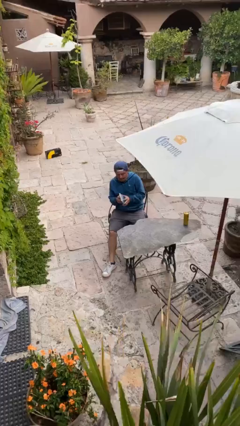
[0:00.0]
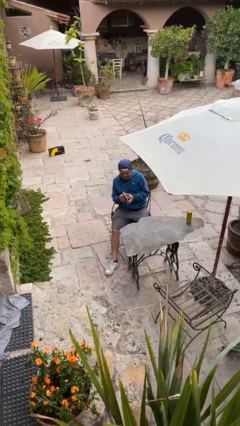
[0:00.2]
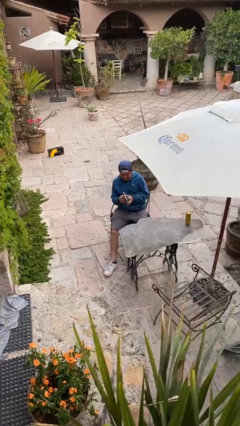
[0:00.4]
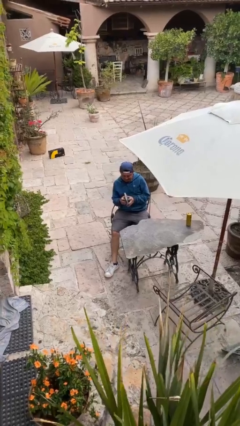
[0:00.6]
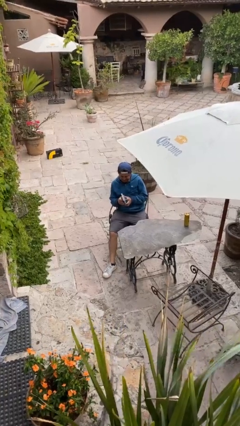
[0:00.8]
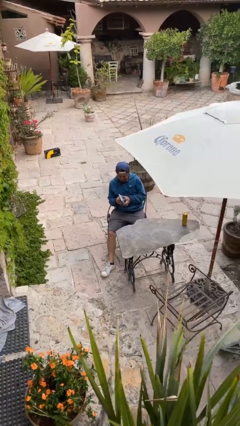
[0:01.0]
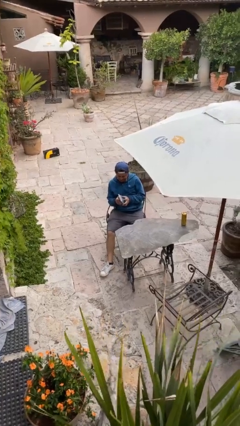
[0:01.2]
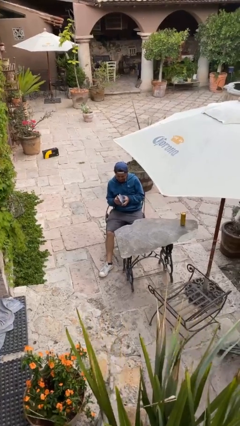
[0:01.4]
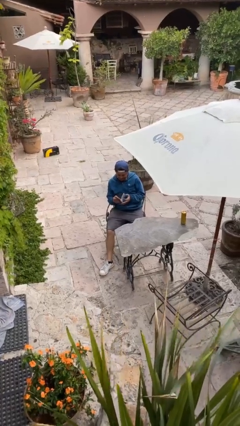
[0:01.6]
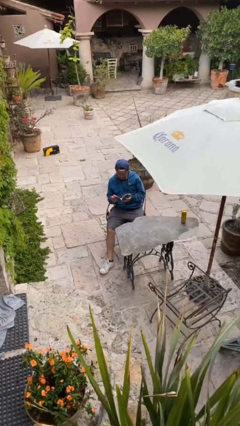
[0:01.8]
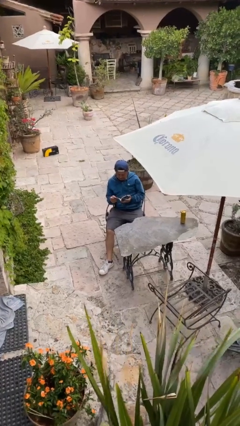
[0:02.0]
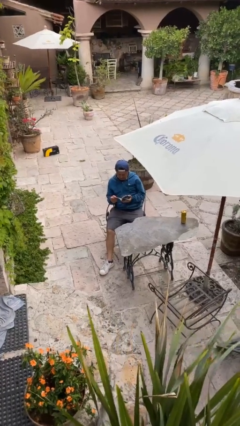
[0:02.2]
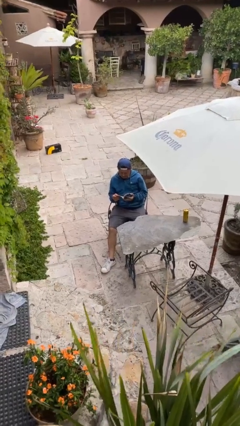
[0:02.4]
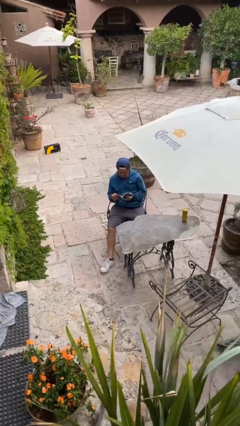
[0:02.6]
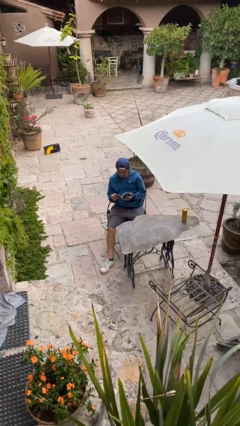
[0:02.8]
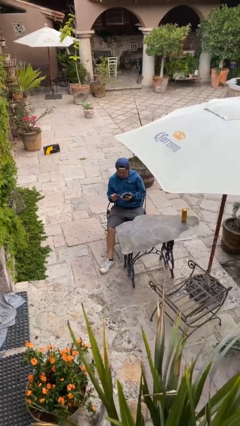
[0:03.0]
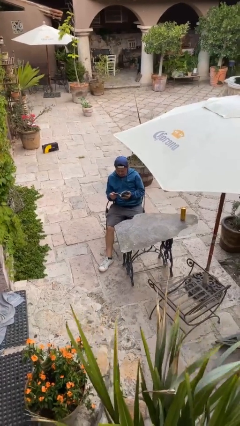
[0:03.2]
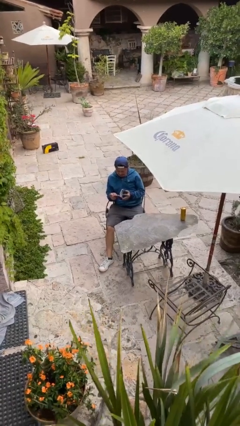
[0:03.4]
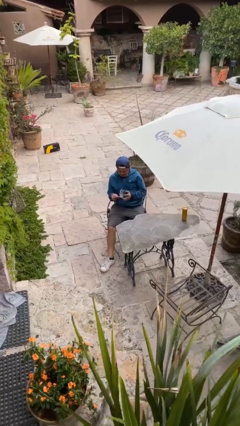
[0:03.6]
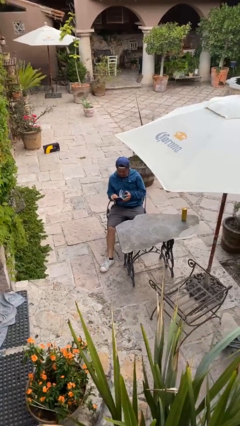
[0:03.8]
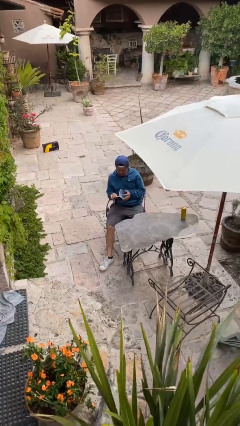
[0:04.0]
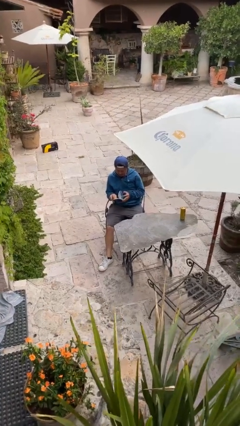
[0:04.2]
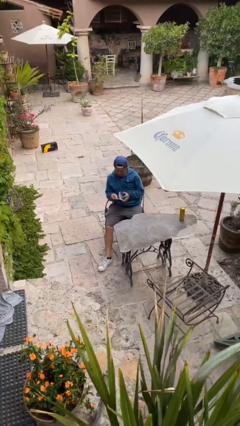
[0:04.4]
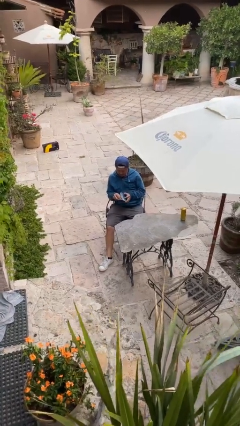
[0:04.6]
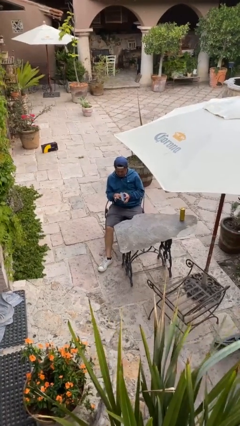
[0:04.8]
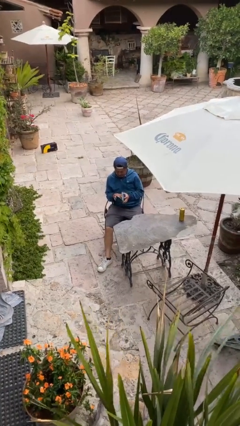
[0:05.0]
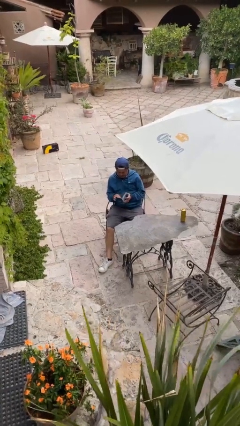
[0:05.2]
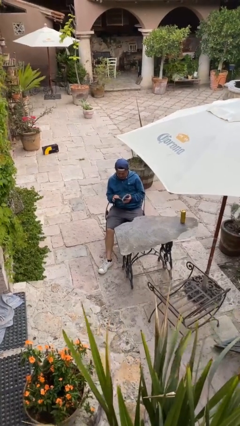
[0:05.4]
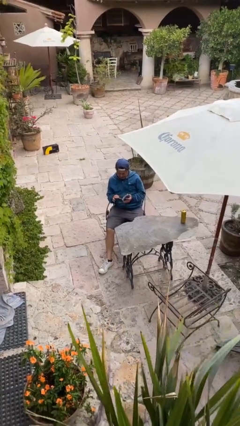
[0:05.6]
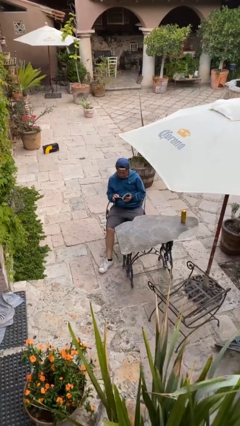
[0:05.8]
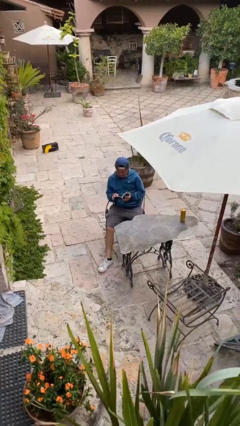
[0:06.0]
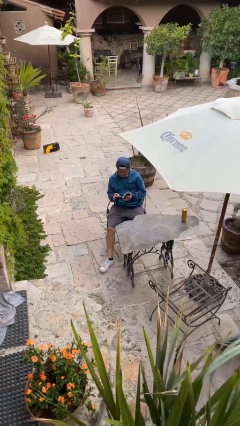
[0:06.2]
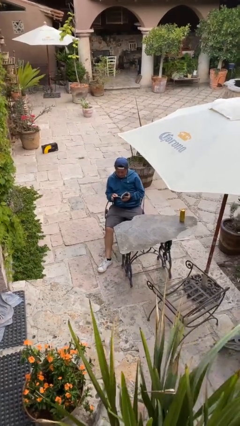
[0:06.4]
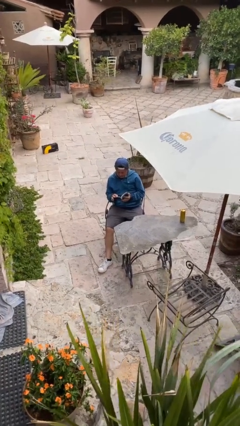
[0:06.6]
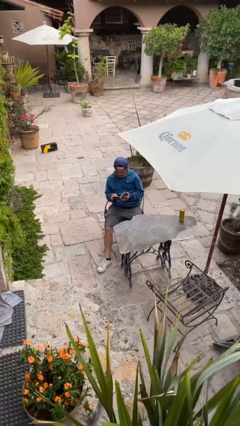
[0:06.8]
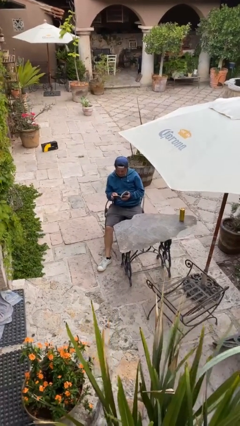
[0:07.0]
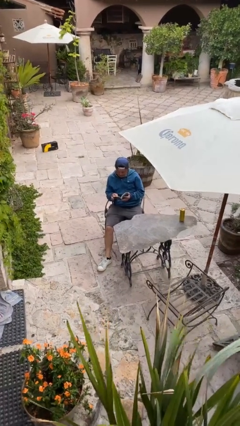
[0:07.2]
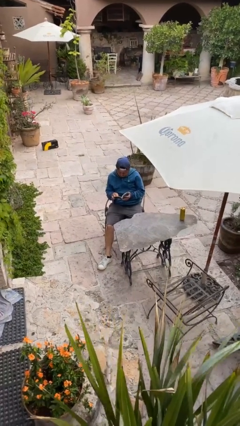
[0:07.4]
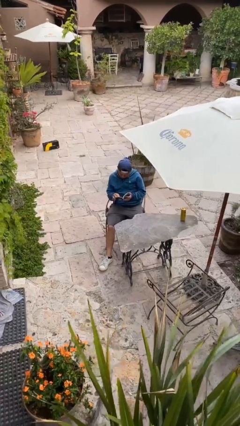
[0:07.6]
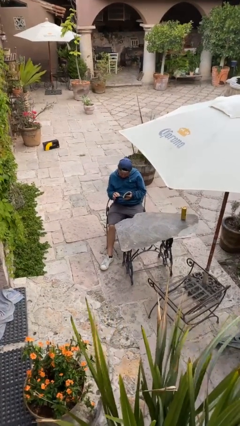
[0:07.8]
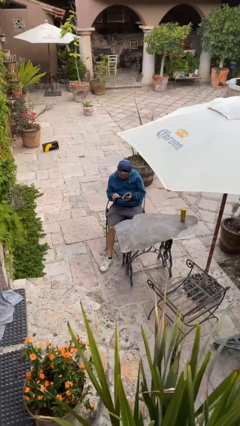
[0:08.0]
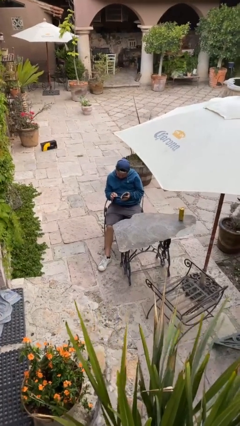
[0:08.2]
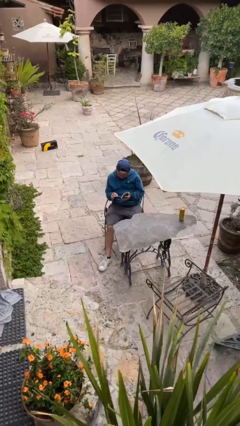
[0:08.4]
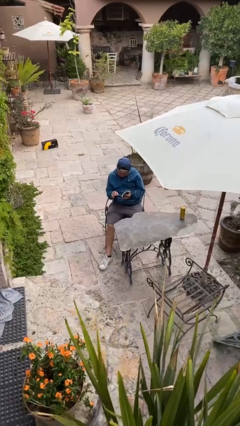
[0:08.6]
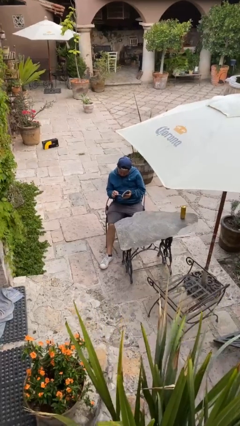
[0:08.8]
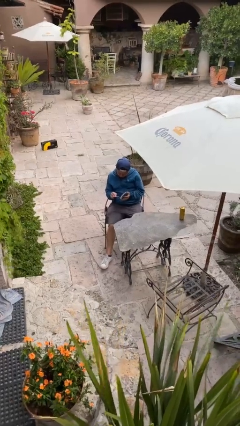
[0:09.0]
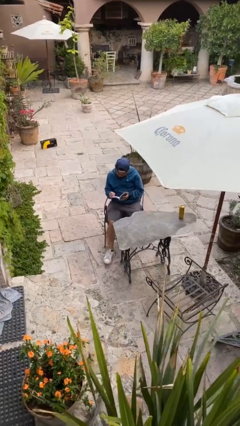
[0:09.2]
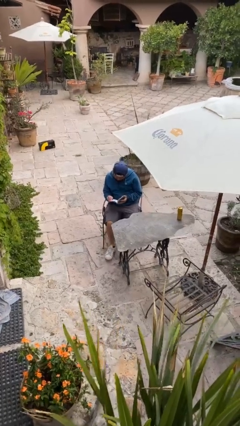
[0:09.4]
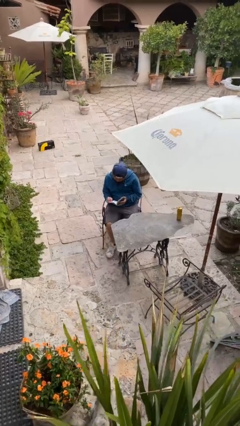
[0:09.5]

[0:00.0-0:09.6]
person reads document

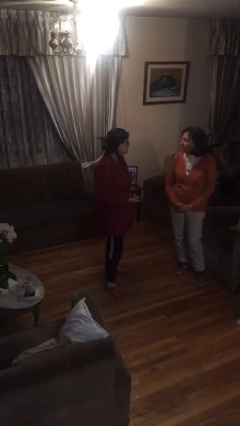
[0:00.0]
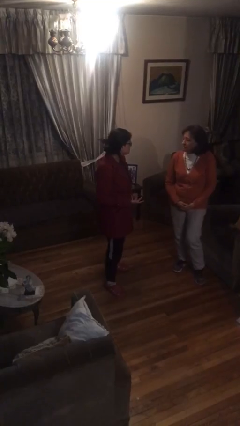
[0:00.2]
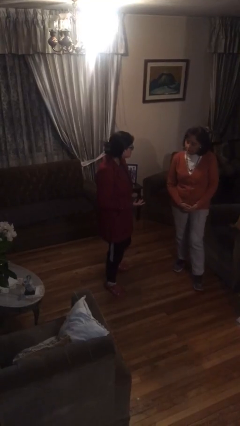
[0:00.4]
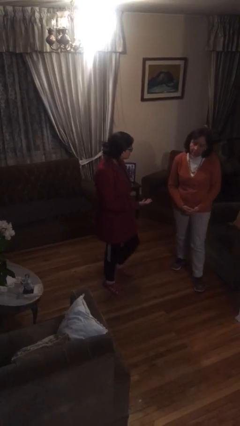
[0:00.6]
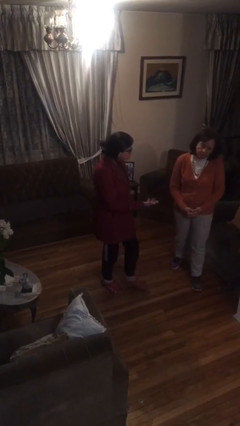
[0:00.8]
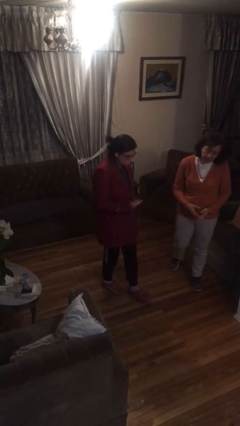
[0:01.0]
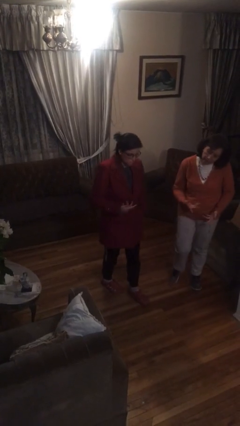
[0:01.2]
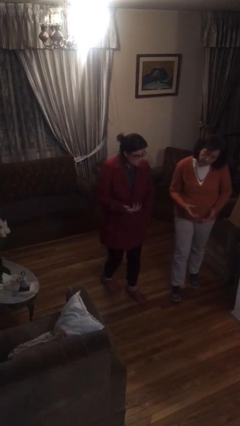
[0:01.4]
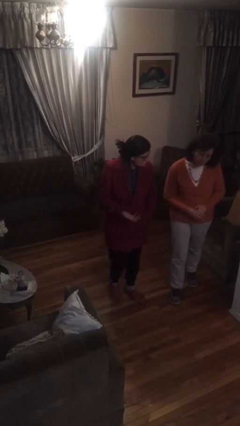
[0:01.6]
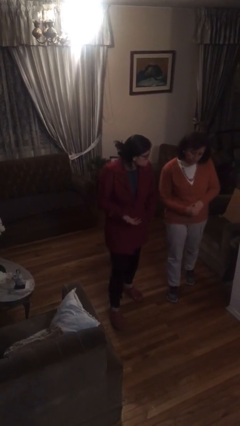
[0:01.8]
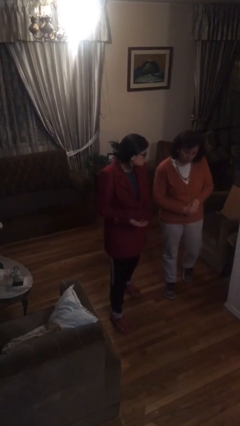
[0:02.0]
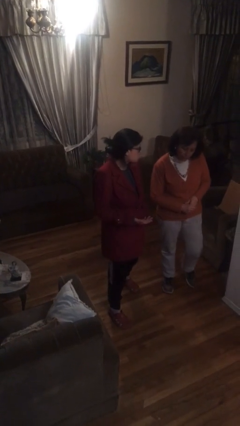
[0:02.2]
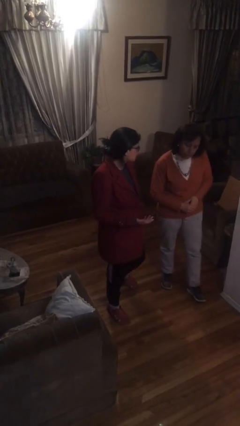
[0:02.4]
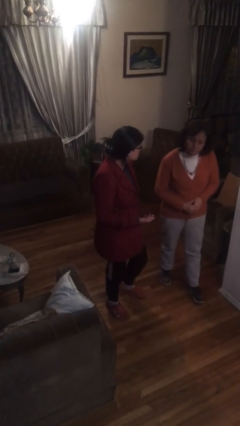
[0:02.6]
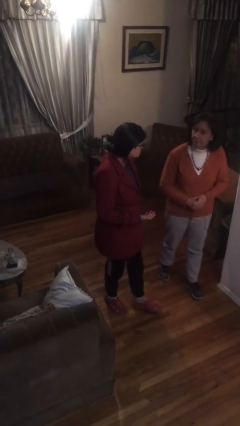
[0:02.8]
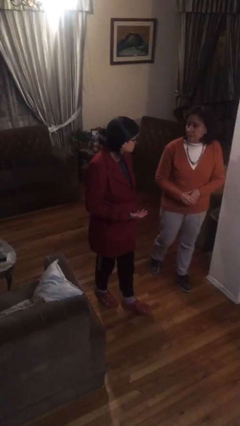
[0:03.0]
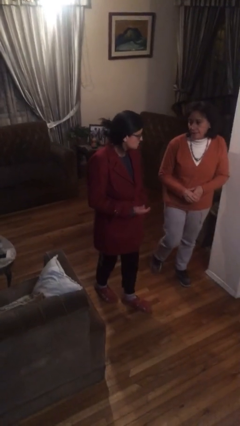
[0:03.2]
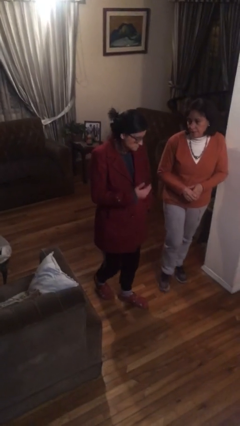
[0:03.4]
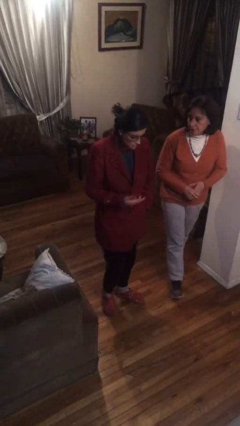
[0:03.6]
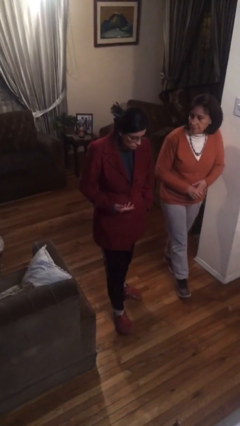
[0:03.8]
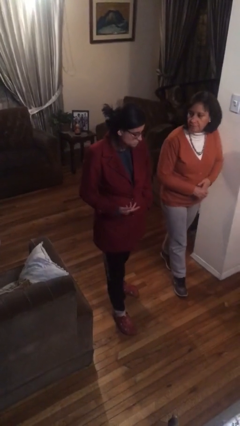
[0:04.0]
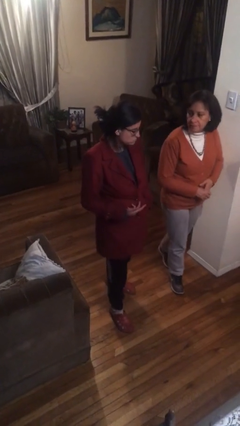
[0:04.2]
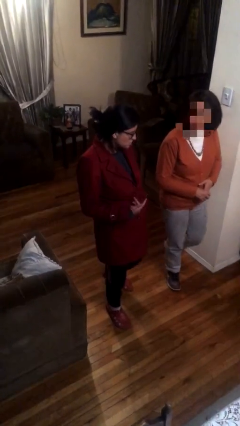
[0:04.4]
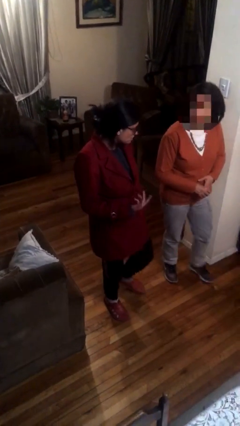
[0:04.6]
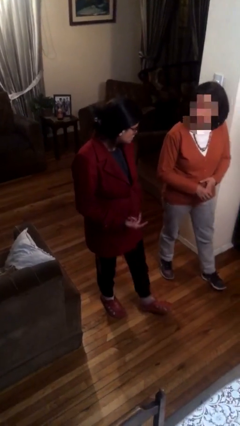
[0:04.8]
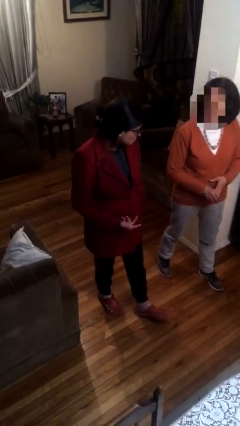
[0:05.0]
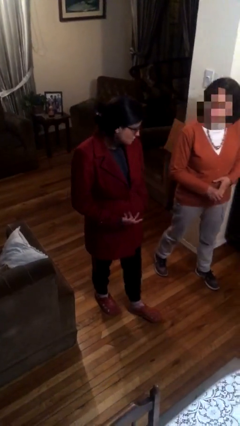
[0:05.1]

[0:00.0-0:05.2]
person talks to person

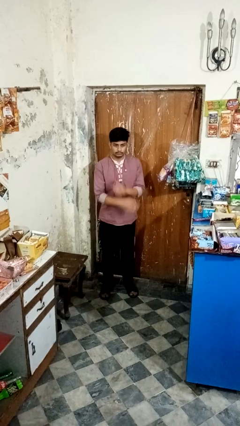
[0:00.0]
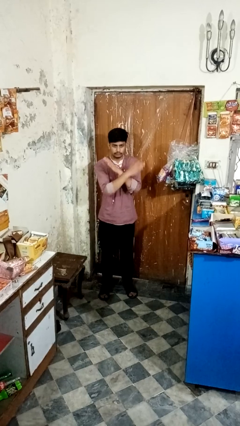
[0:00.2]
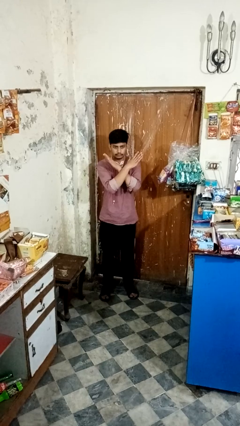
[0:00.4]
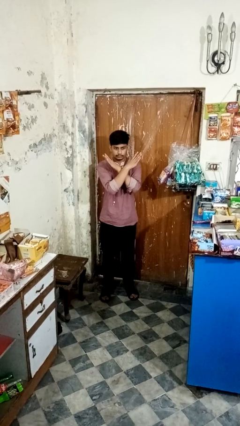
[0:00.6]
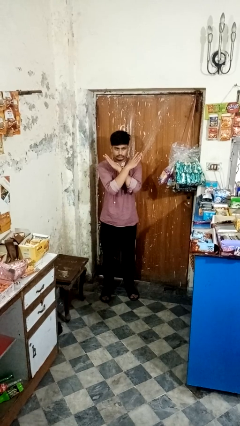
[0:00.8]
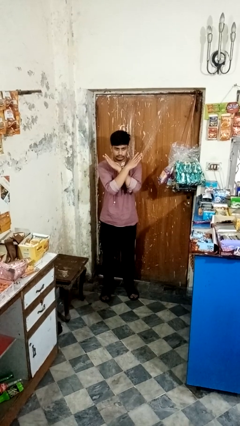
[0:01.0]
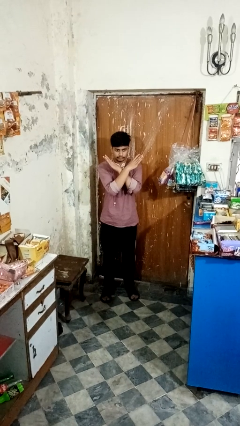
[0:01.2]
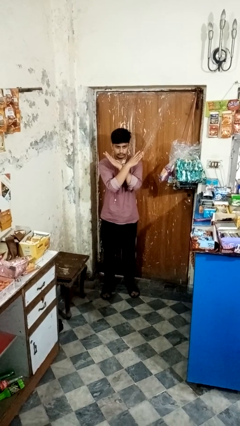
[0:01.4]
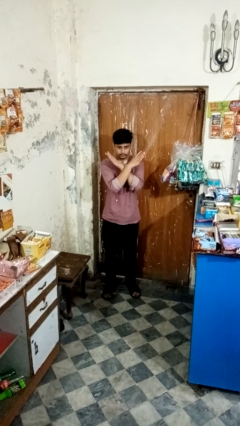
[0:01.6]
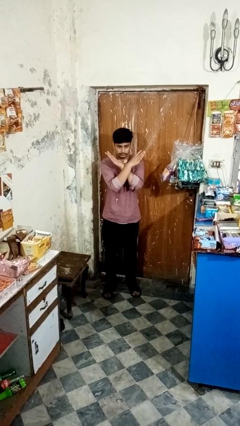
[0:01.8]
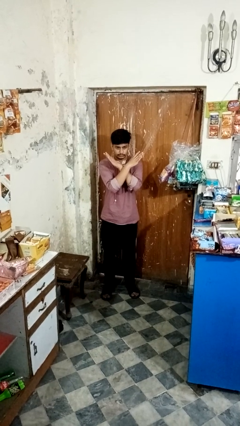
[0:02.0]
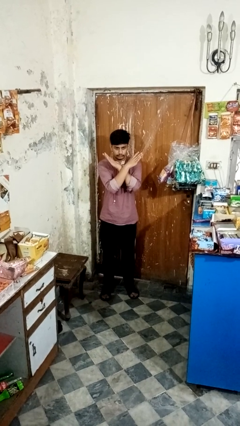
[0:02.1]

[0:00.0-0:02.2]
person gestures arms x

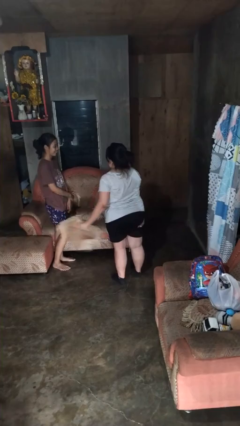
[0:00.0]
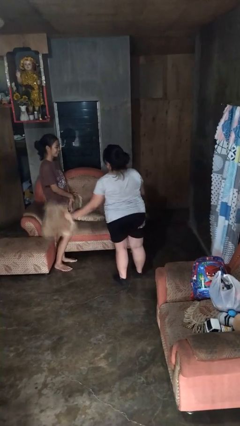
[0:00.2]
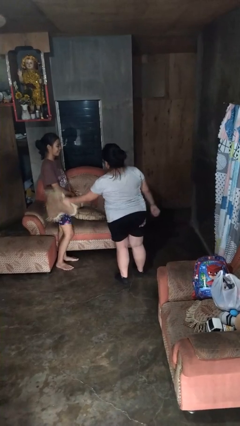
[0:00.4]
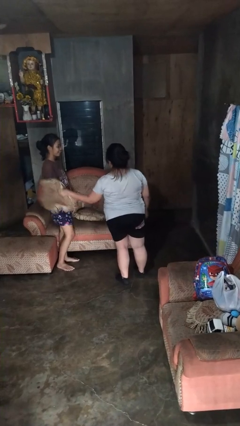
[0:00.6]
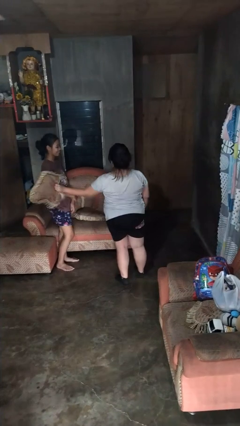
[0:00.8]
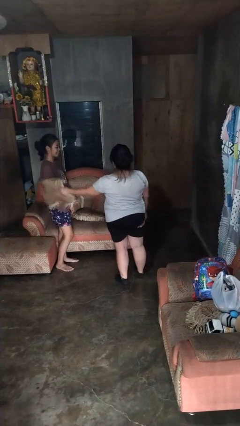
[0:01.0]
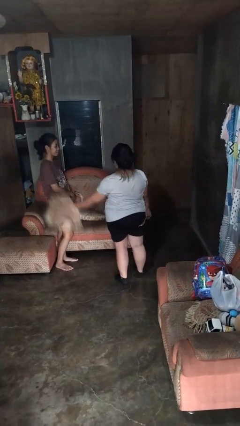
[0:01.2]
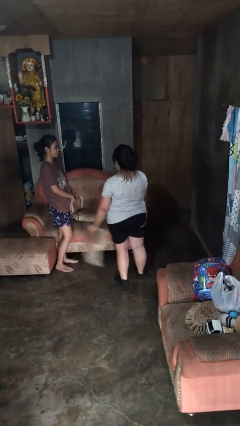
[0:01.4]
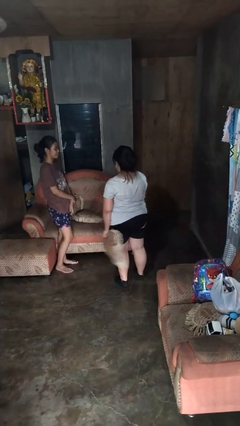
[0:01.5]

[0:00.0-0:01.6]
person hits person with pillow
